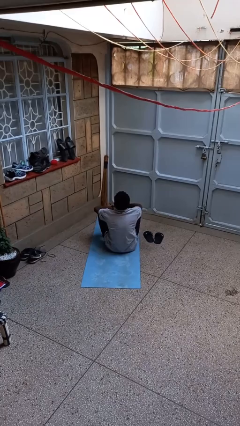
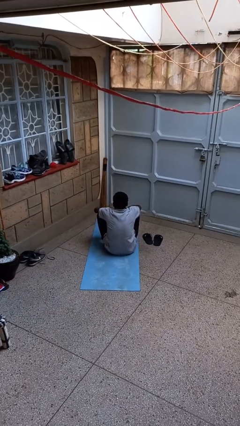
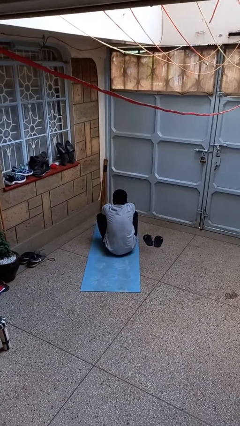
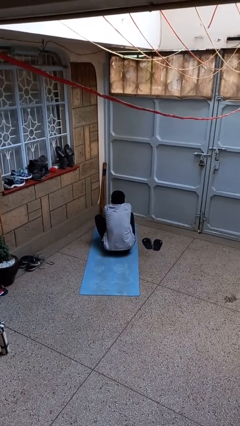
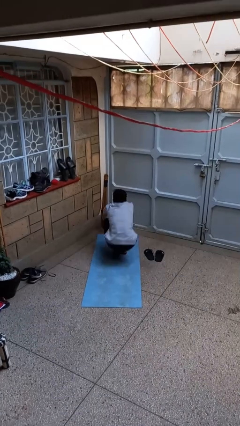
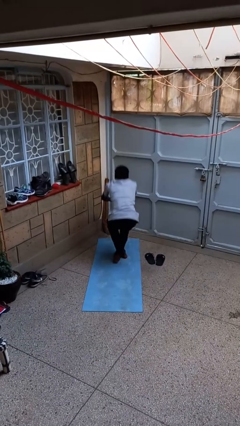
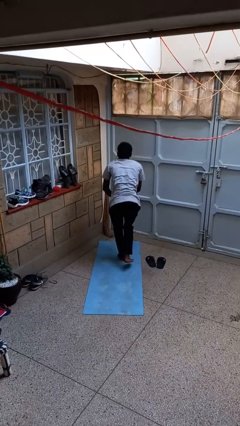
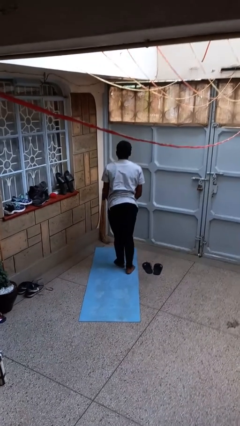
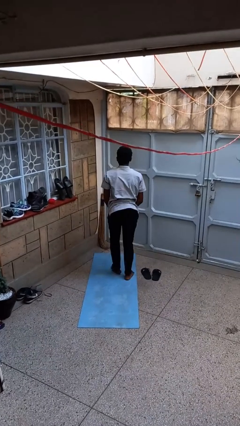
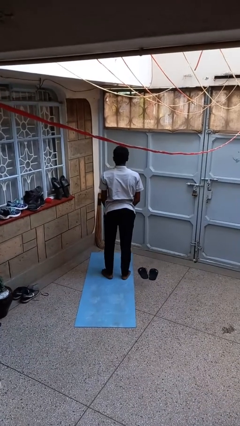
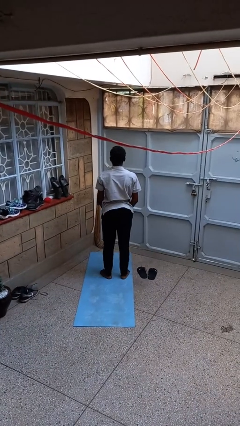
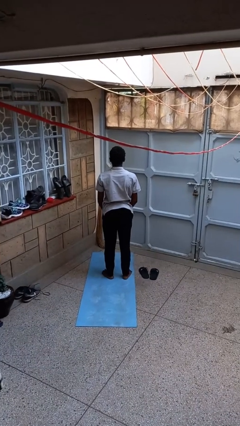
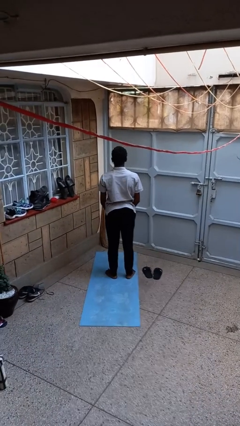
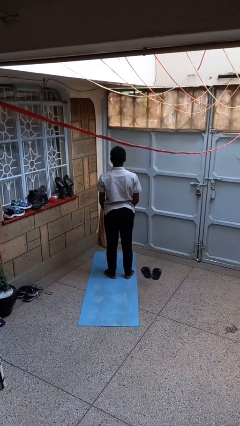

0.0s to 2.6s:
person stands up from floor

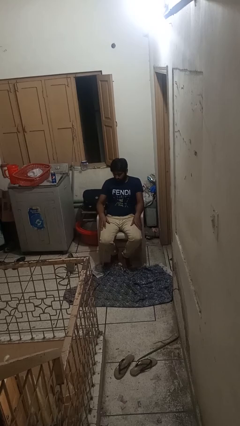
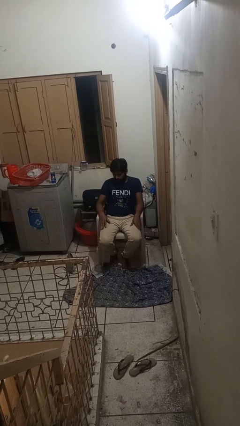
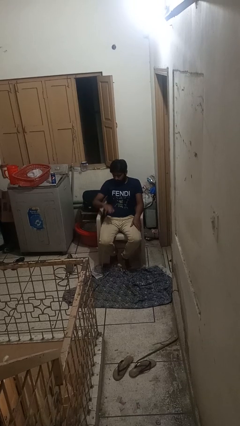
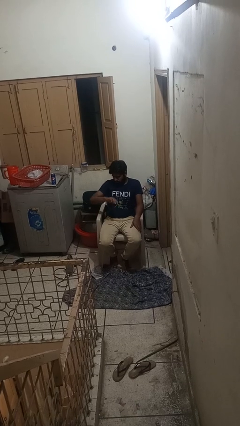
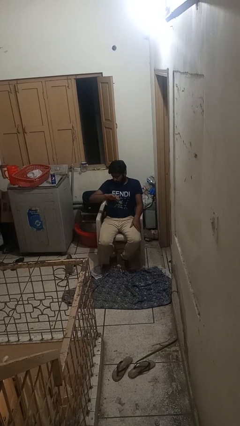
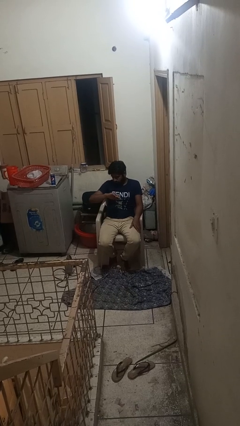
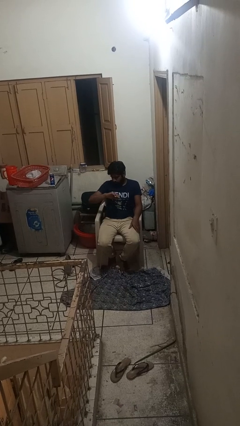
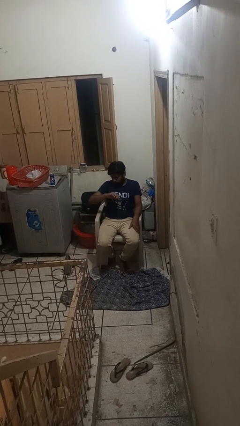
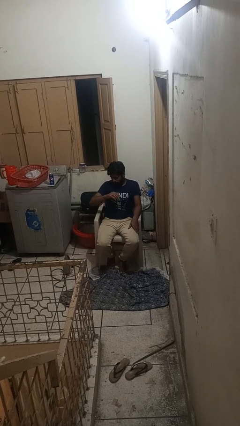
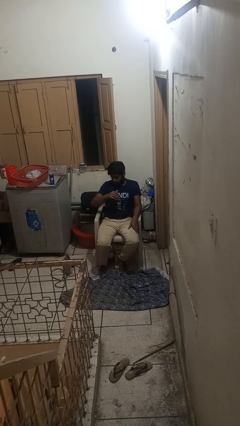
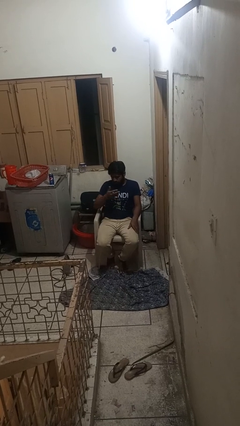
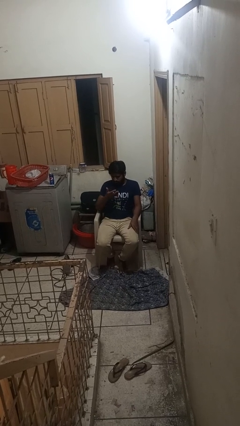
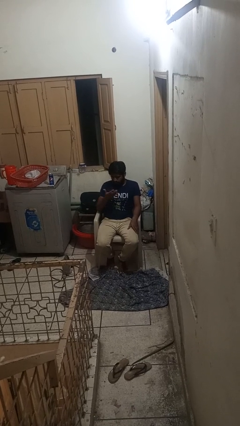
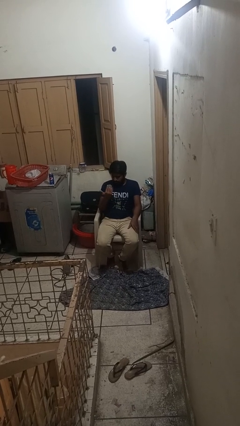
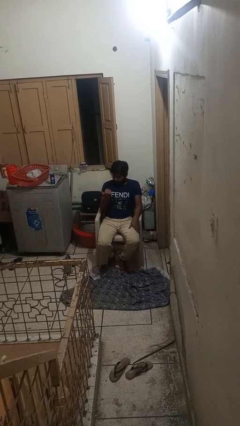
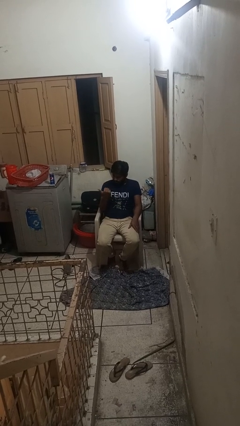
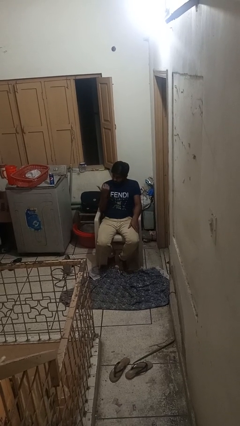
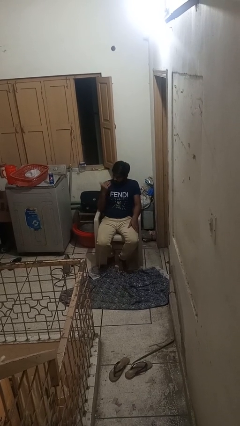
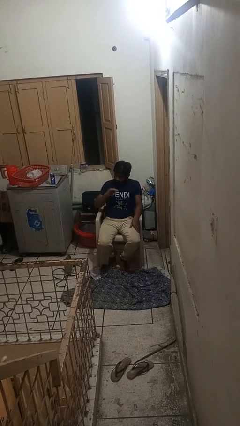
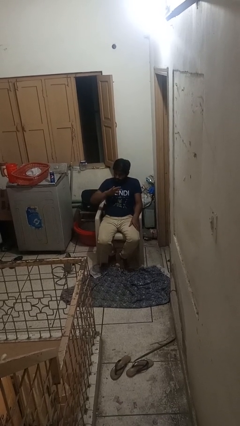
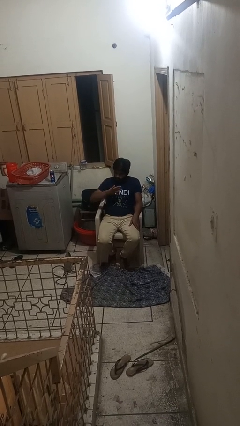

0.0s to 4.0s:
person looks at hands in lap

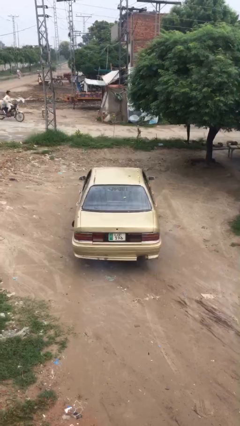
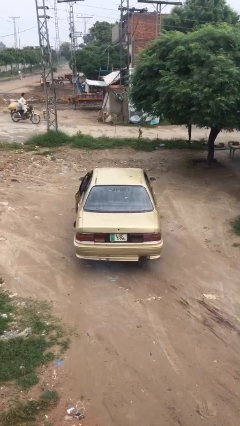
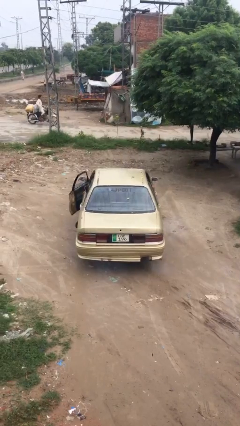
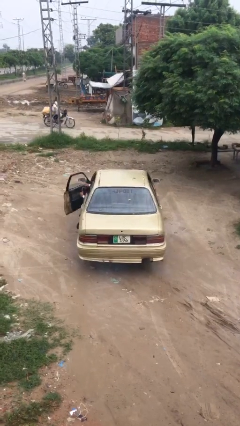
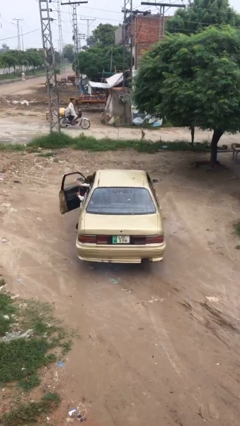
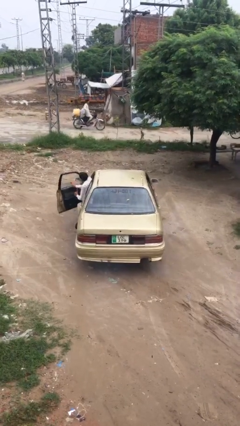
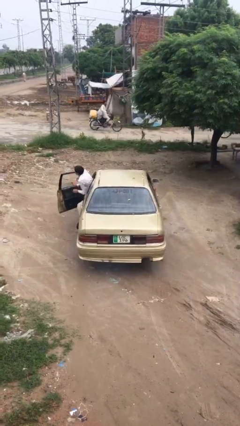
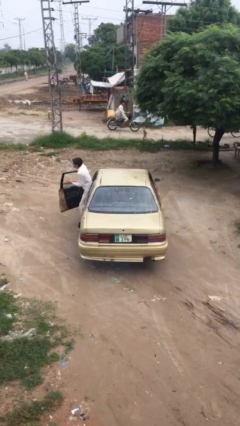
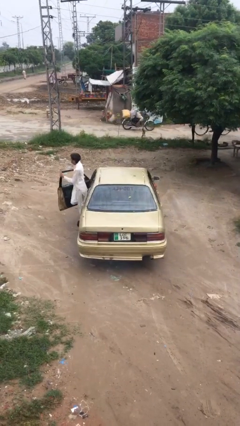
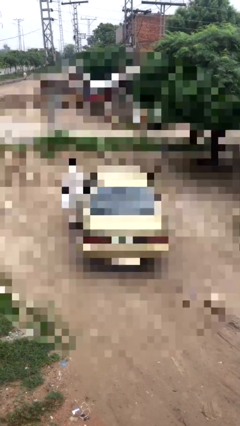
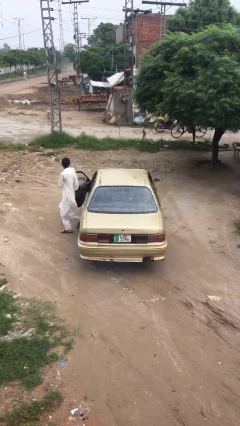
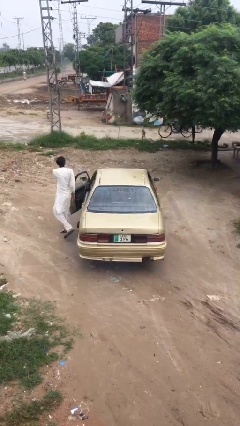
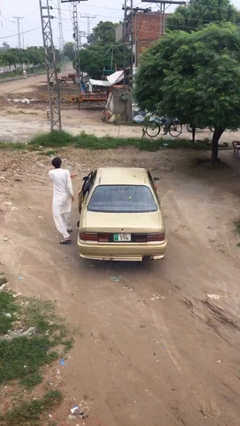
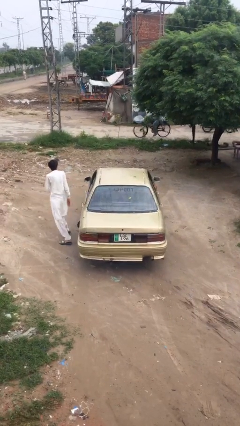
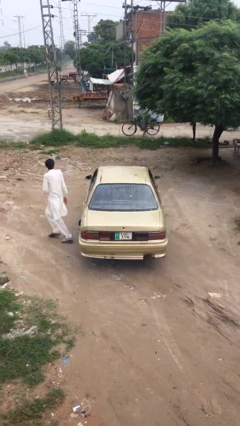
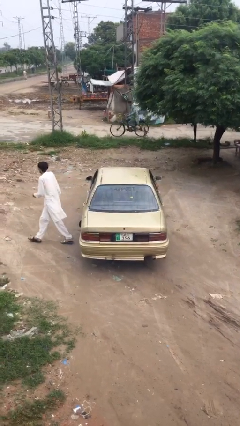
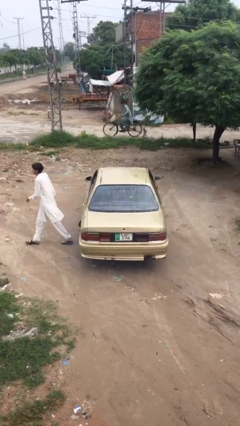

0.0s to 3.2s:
car drops off person

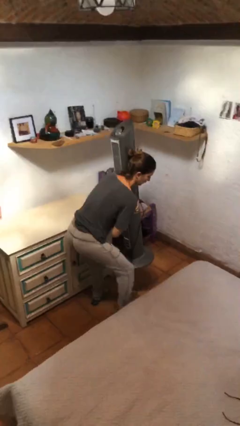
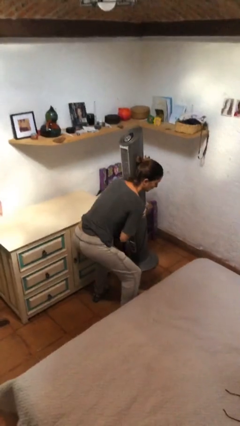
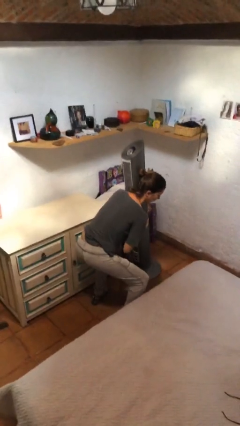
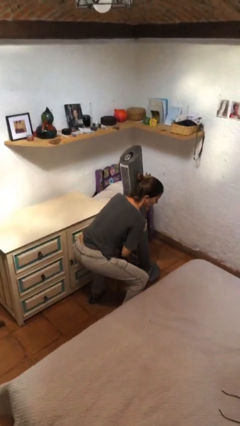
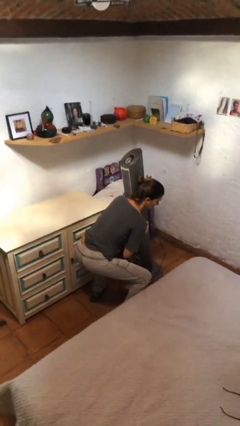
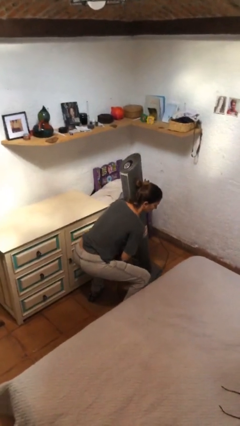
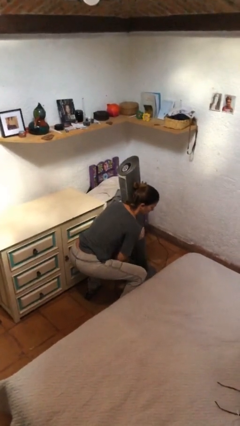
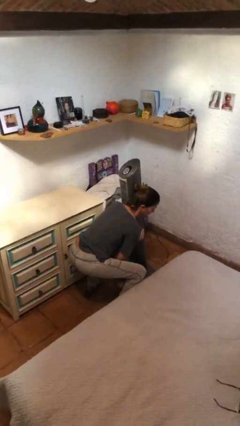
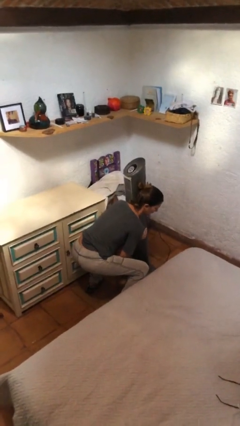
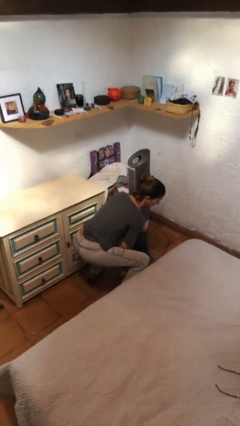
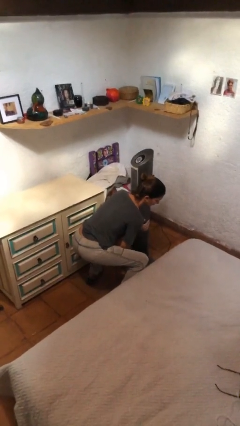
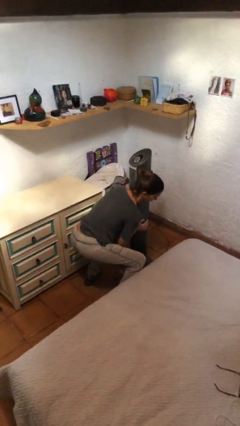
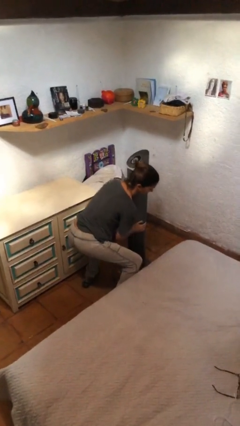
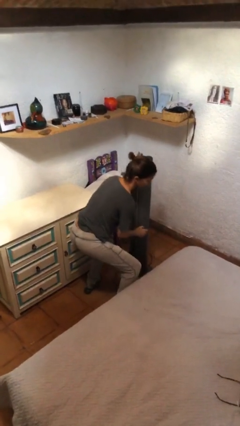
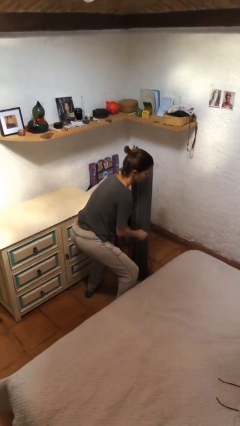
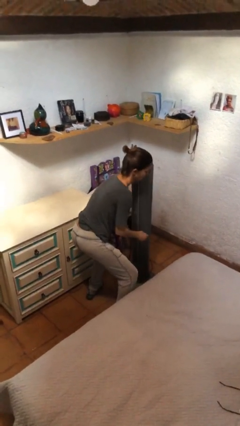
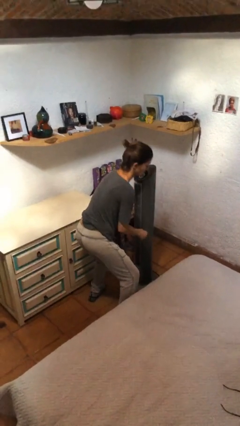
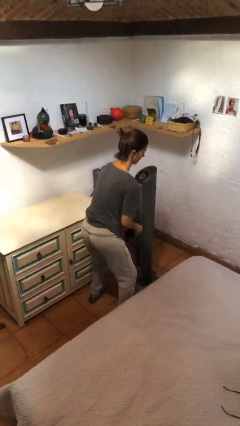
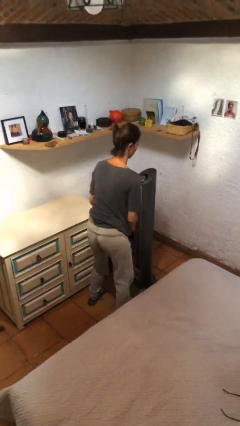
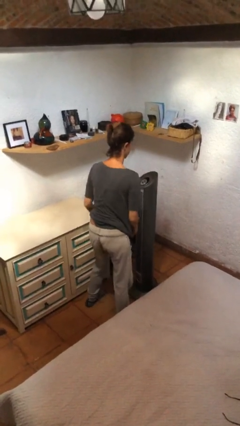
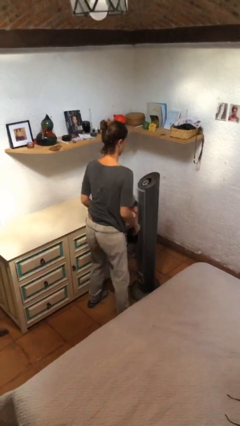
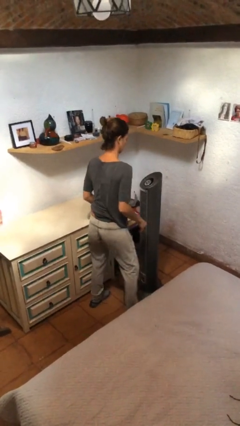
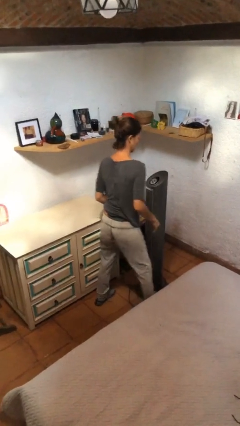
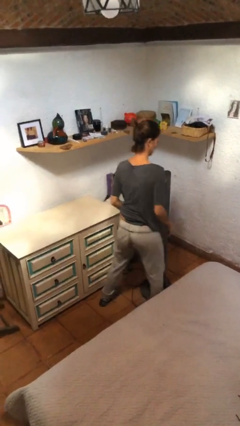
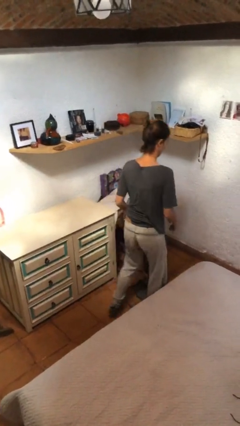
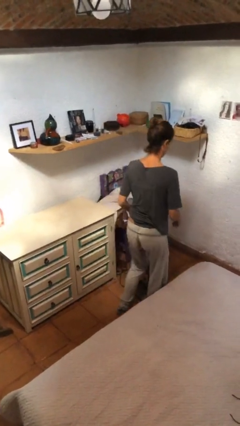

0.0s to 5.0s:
person puts down object on floor

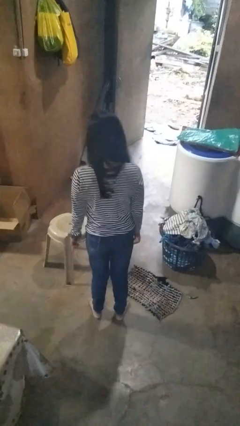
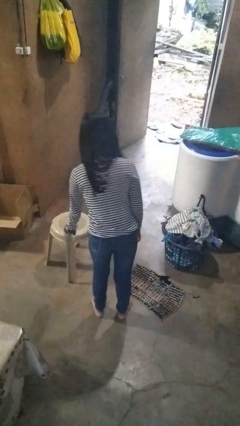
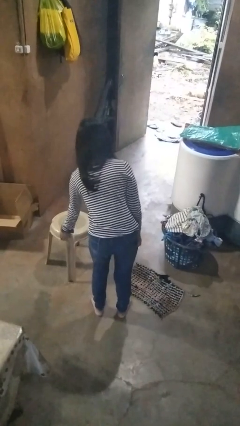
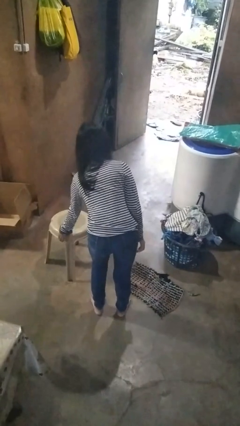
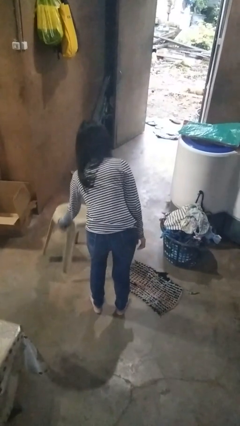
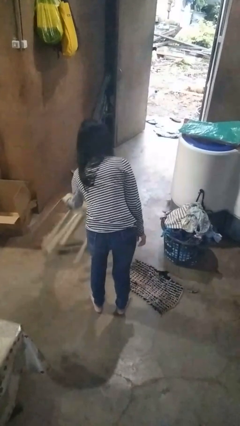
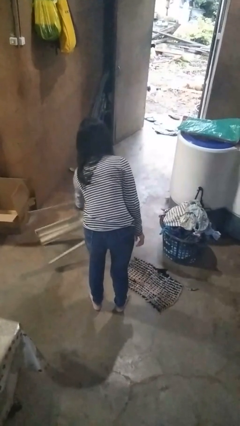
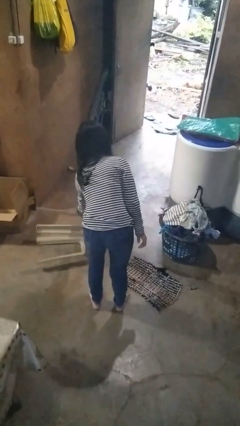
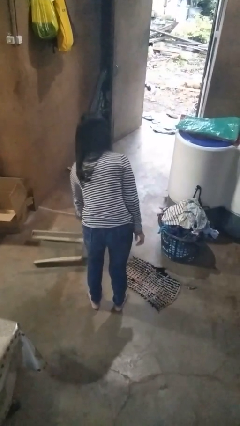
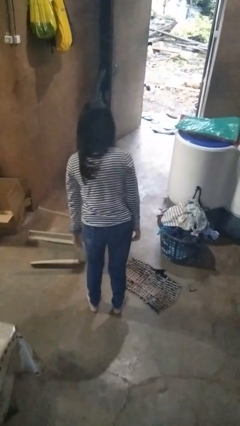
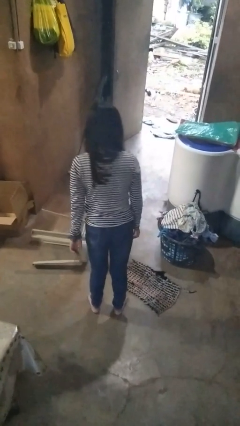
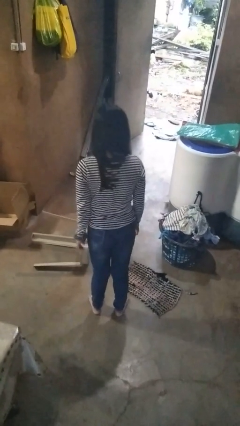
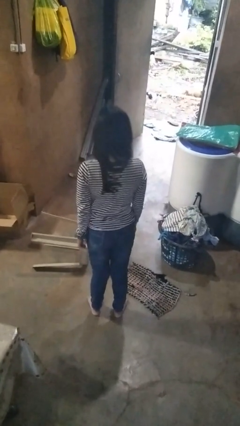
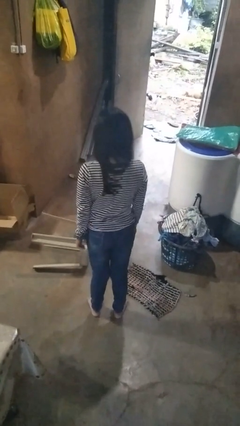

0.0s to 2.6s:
person knocks over furniture
